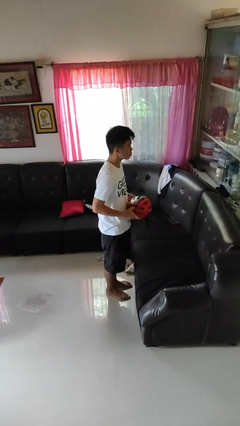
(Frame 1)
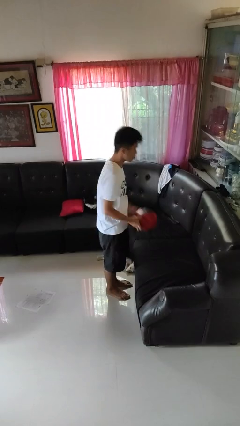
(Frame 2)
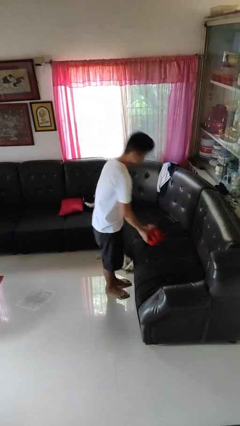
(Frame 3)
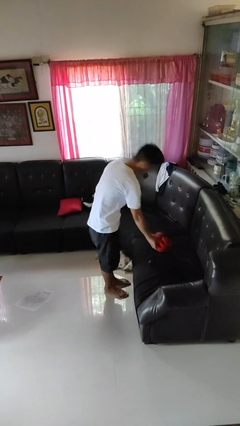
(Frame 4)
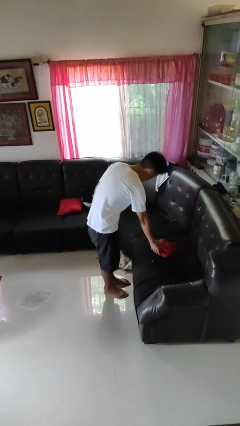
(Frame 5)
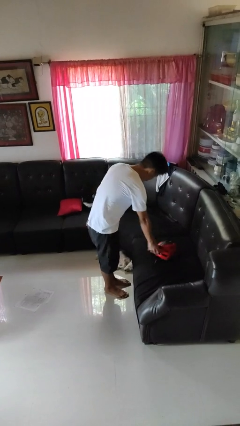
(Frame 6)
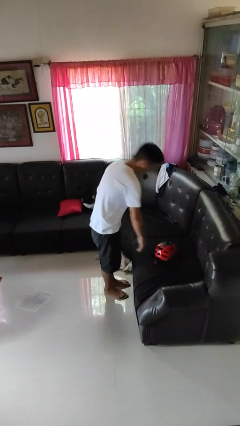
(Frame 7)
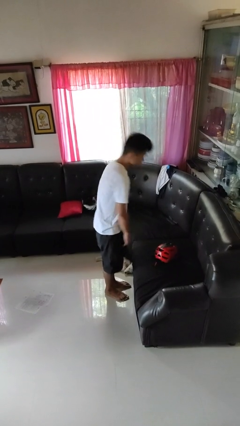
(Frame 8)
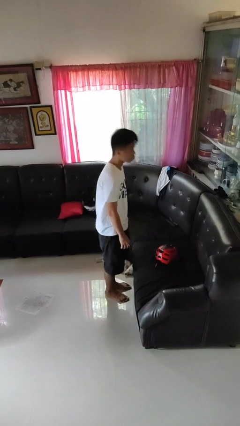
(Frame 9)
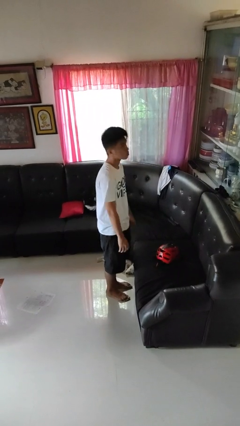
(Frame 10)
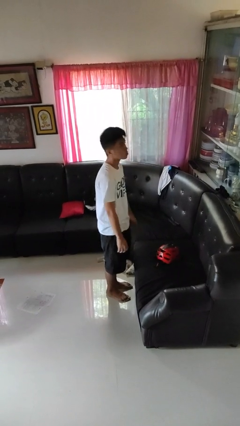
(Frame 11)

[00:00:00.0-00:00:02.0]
person puts down object on couch

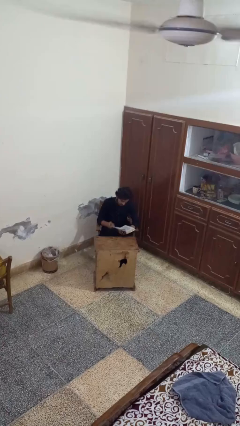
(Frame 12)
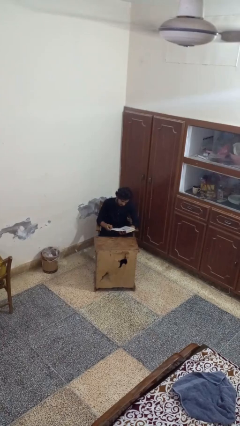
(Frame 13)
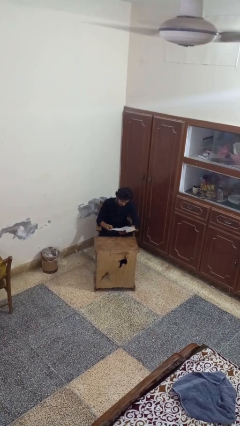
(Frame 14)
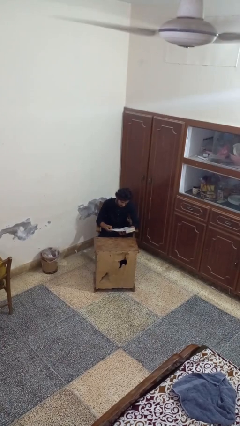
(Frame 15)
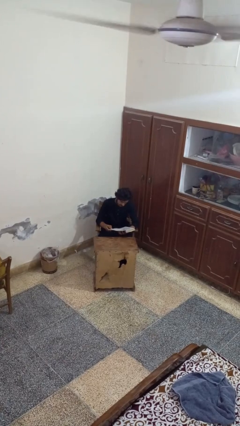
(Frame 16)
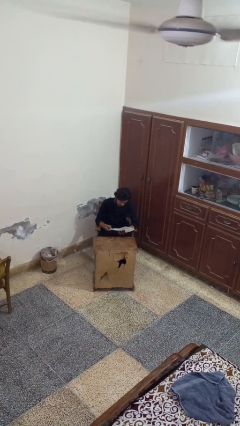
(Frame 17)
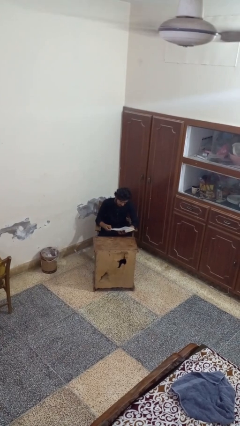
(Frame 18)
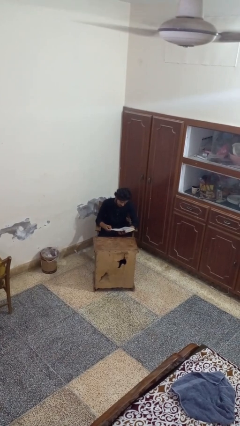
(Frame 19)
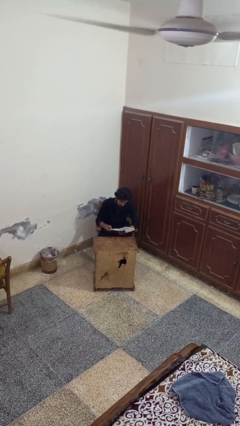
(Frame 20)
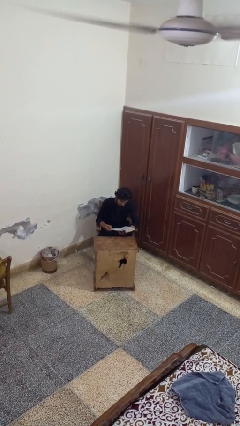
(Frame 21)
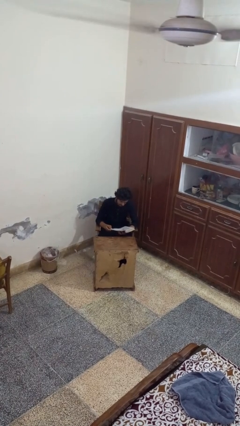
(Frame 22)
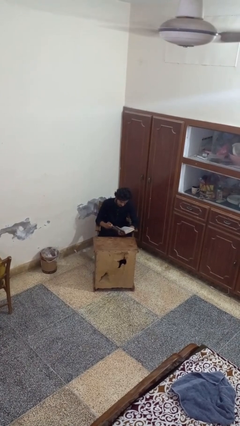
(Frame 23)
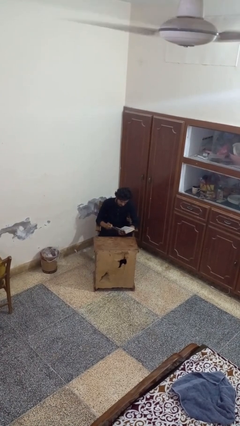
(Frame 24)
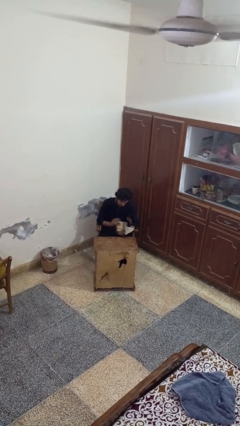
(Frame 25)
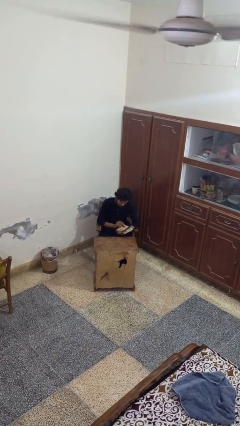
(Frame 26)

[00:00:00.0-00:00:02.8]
person reads book

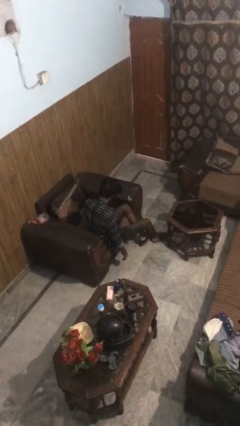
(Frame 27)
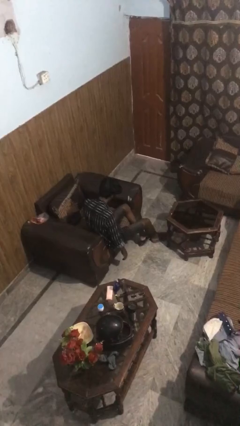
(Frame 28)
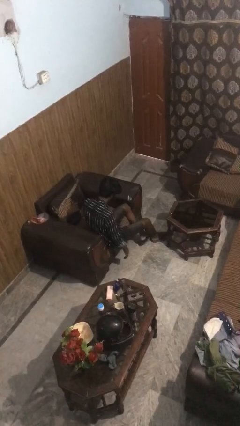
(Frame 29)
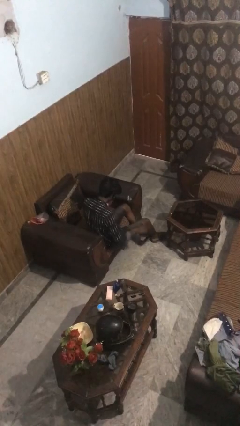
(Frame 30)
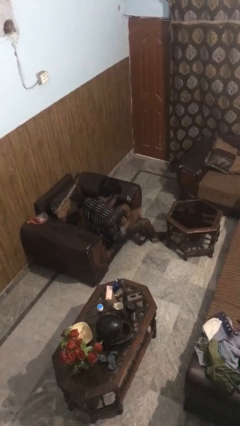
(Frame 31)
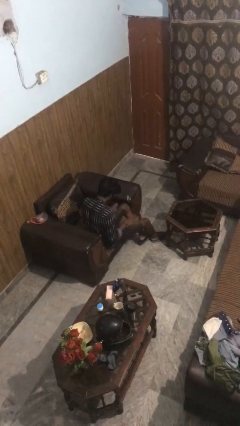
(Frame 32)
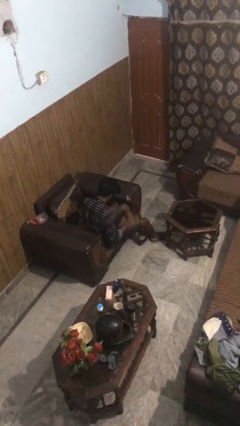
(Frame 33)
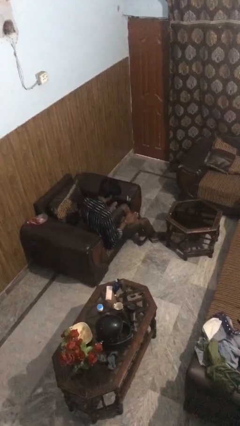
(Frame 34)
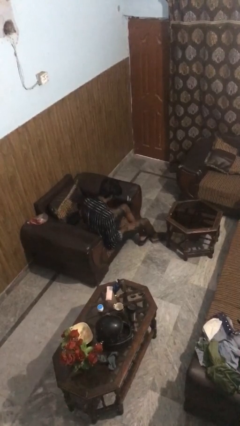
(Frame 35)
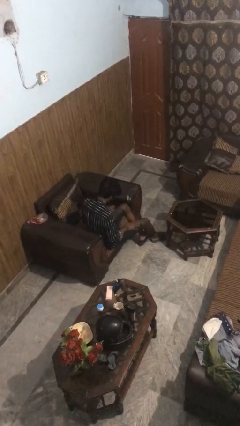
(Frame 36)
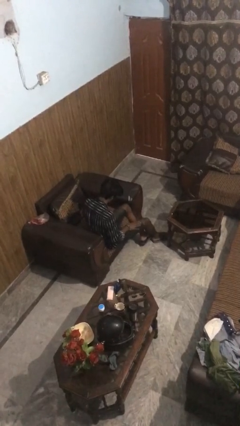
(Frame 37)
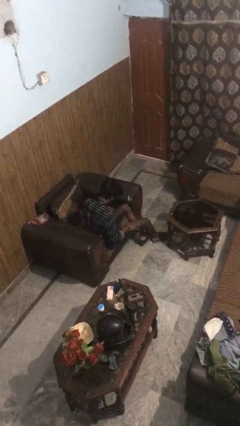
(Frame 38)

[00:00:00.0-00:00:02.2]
person slaps hands on thighs

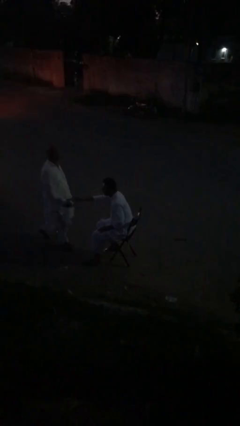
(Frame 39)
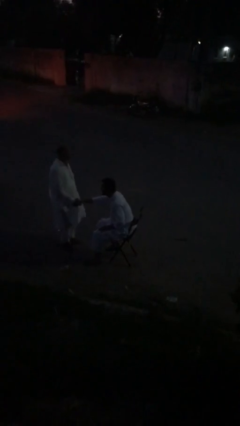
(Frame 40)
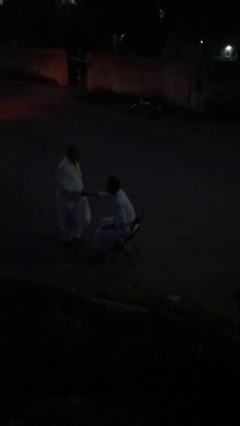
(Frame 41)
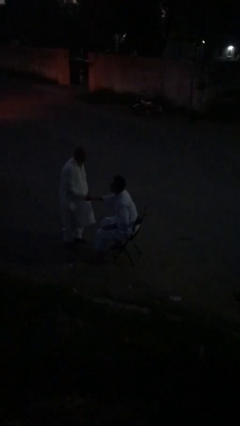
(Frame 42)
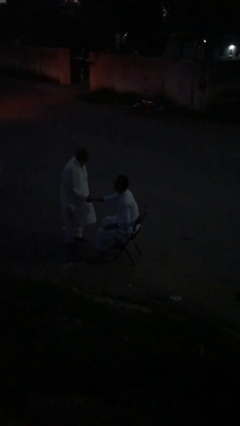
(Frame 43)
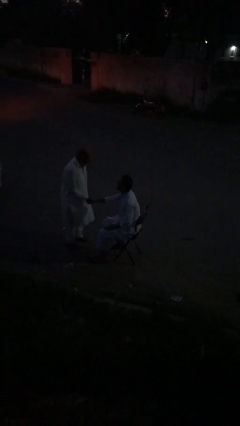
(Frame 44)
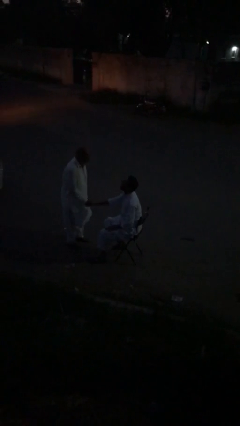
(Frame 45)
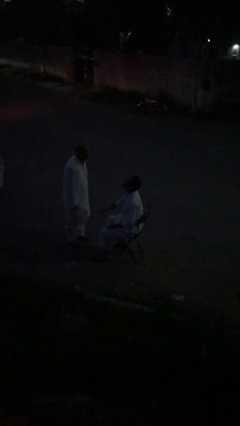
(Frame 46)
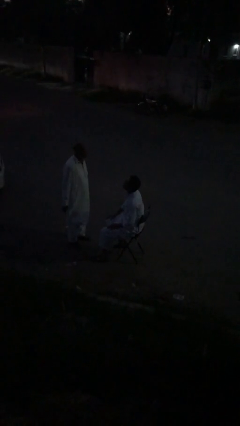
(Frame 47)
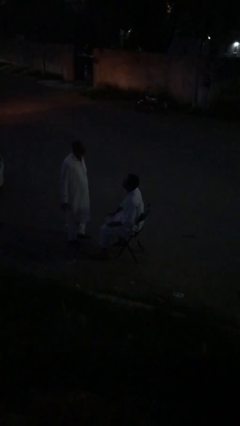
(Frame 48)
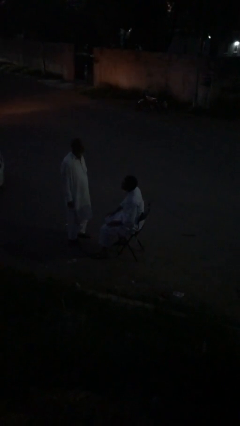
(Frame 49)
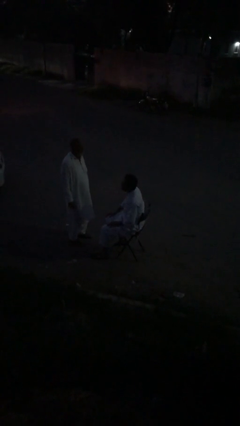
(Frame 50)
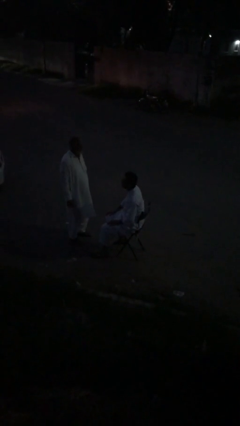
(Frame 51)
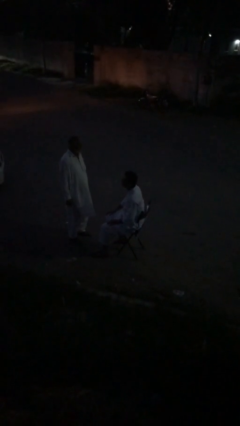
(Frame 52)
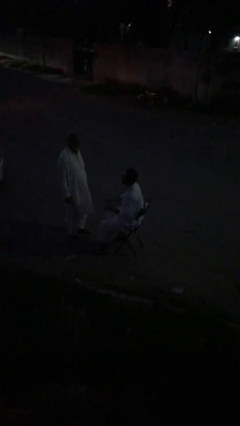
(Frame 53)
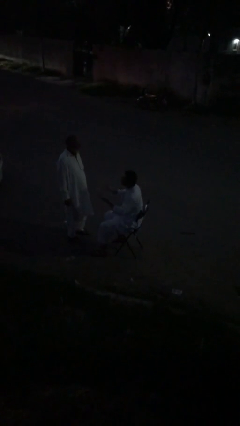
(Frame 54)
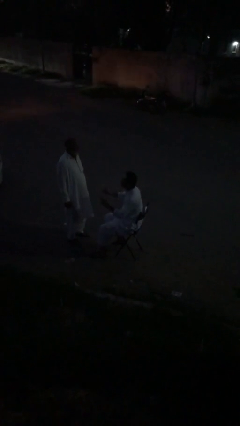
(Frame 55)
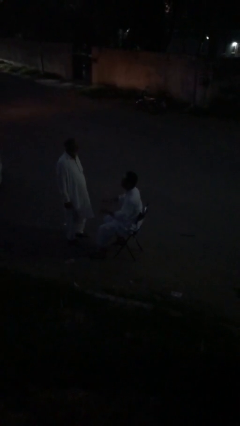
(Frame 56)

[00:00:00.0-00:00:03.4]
person shakes hand

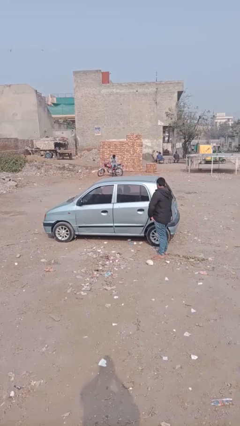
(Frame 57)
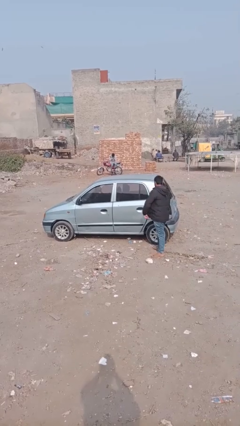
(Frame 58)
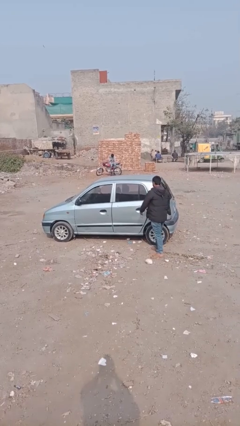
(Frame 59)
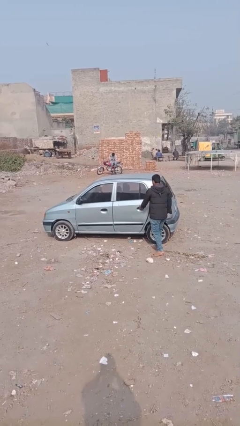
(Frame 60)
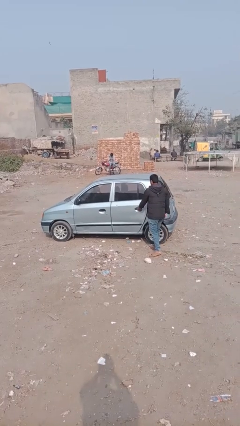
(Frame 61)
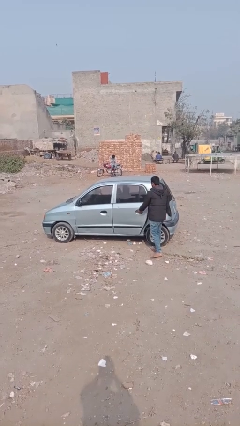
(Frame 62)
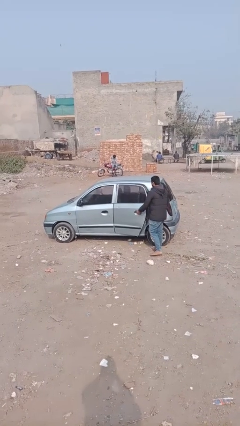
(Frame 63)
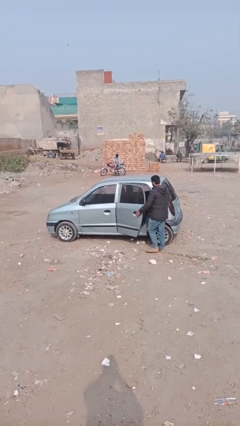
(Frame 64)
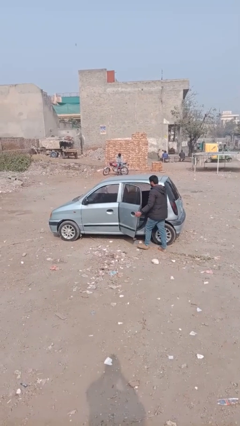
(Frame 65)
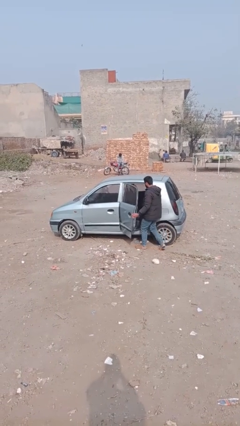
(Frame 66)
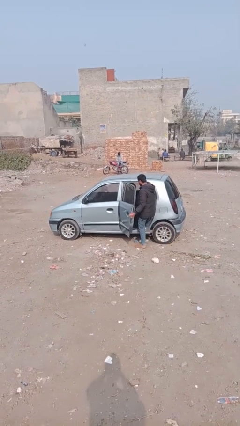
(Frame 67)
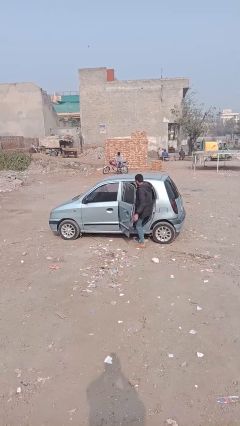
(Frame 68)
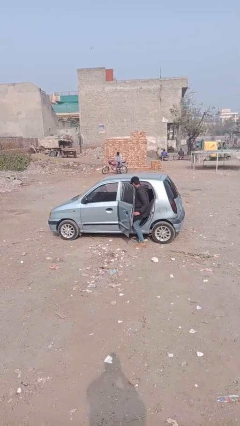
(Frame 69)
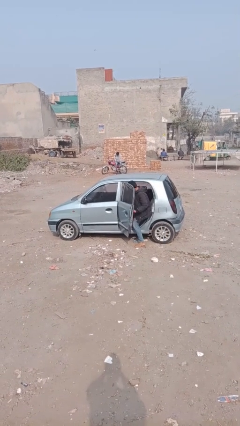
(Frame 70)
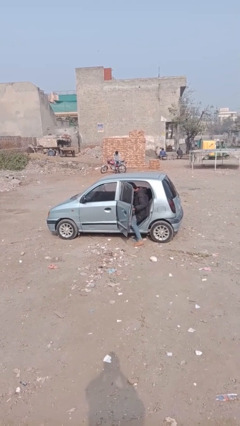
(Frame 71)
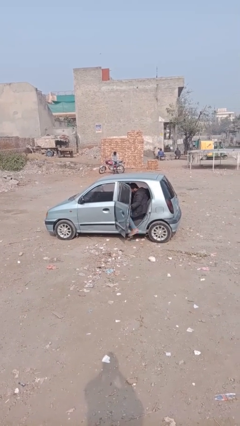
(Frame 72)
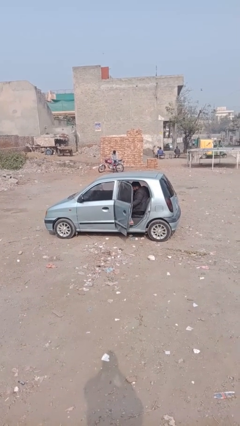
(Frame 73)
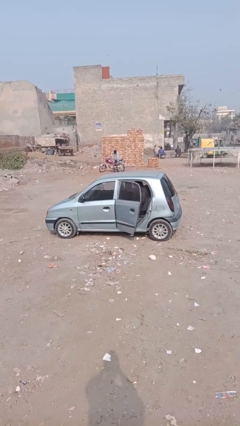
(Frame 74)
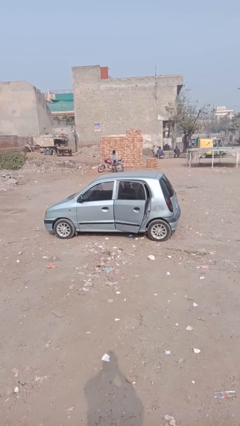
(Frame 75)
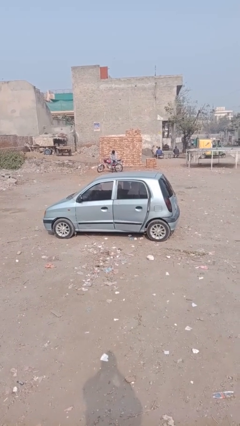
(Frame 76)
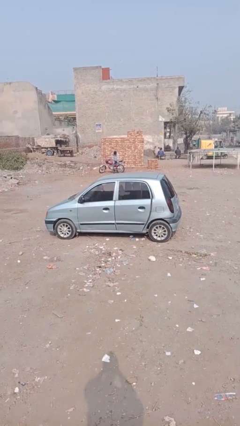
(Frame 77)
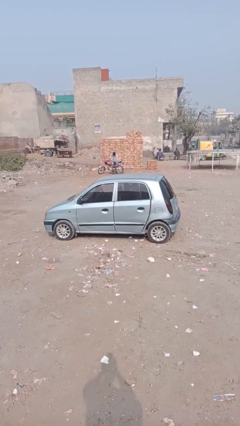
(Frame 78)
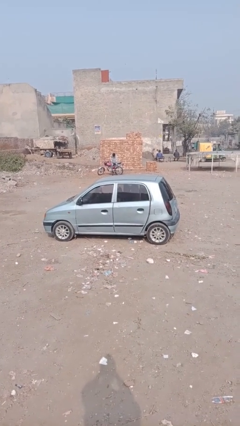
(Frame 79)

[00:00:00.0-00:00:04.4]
car picks up person

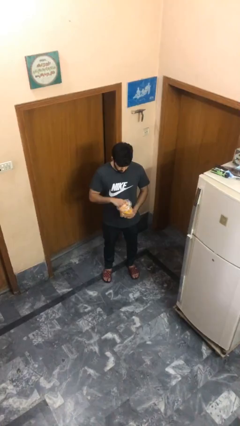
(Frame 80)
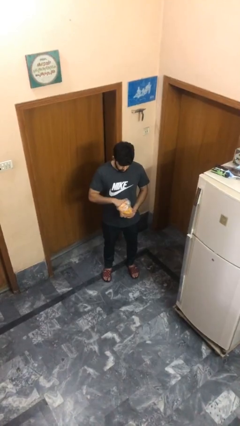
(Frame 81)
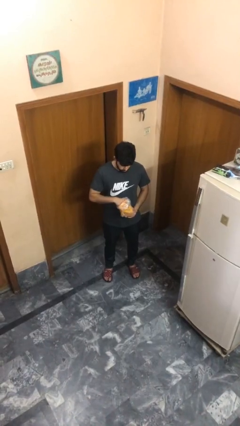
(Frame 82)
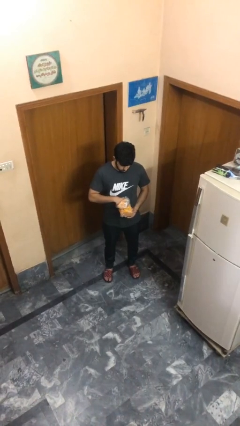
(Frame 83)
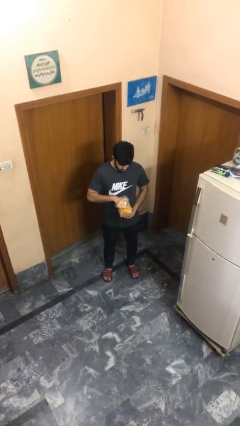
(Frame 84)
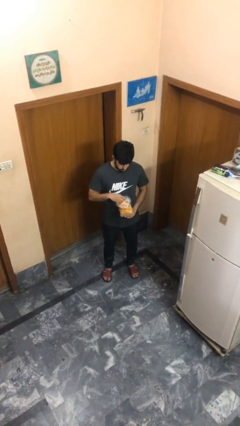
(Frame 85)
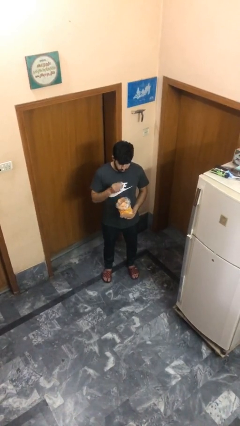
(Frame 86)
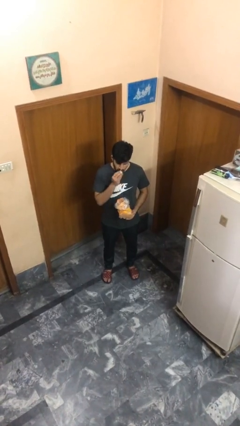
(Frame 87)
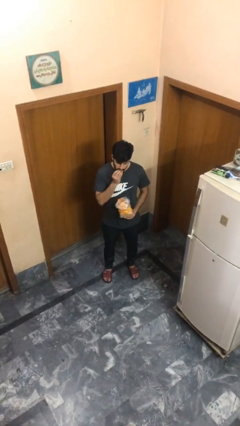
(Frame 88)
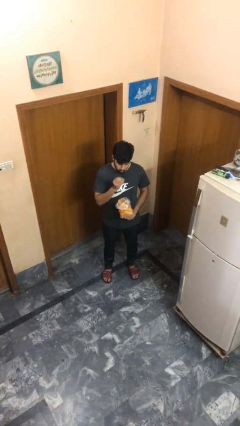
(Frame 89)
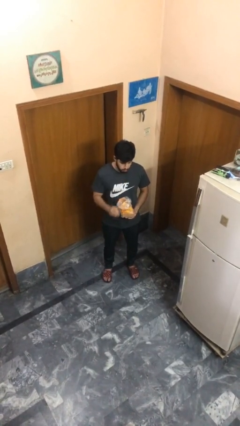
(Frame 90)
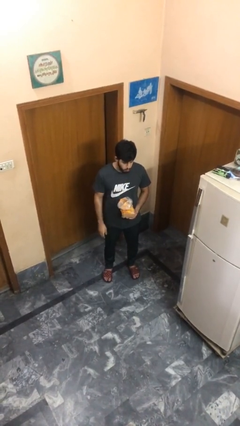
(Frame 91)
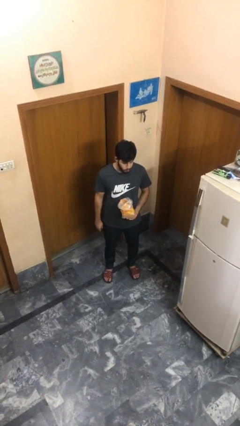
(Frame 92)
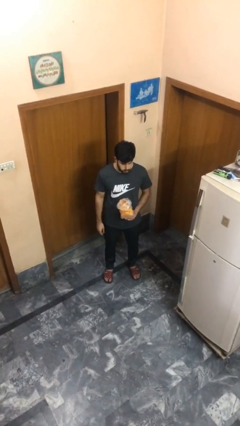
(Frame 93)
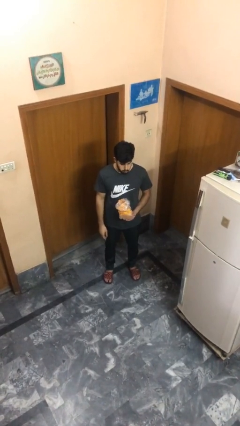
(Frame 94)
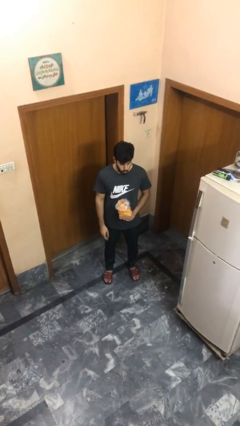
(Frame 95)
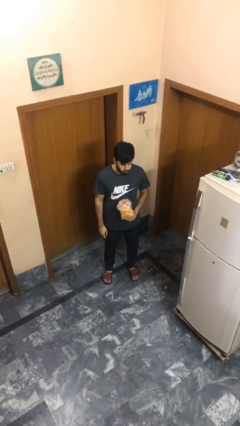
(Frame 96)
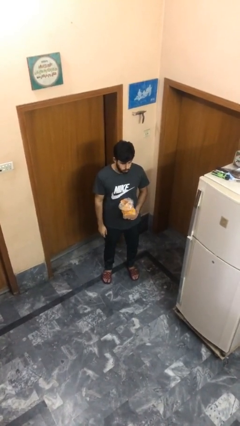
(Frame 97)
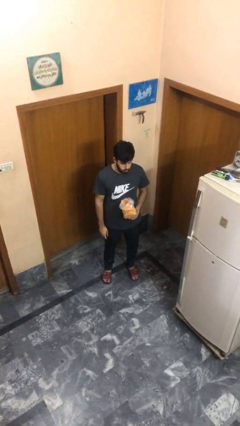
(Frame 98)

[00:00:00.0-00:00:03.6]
person eats snack from bag
